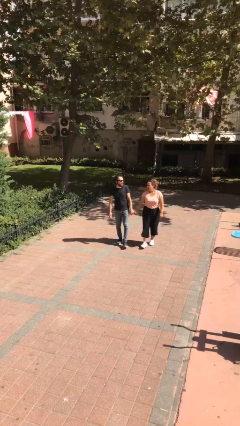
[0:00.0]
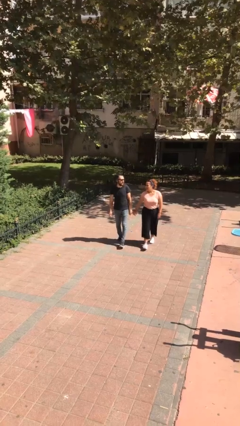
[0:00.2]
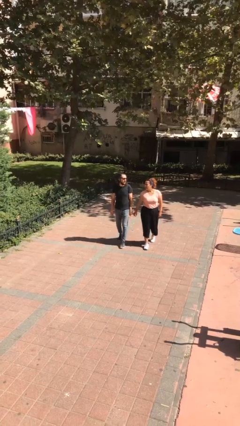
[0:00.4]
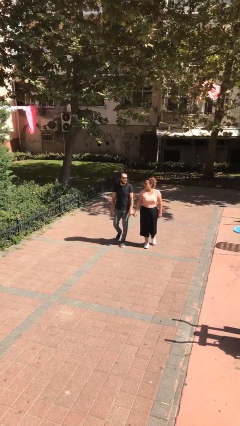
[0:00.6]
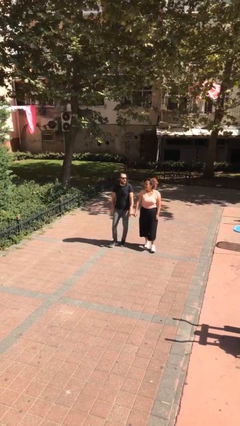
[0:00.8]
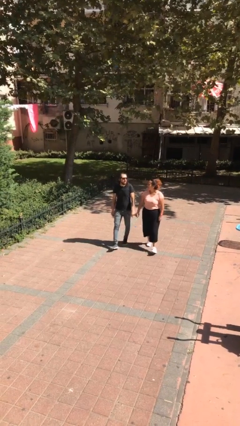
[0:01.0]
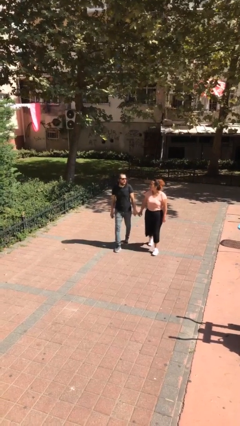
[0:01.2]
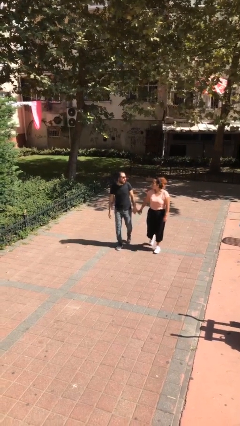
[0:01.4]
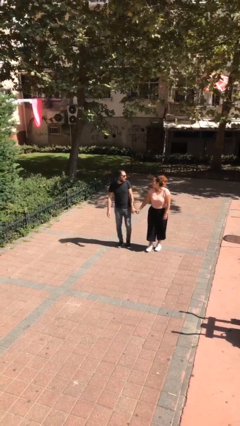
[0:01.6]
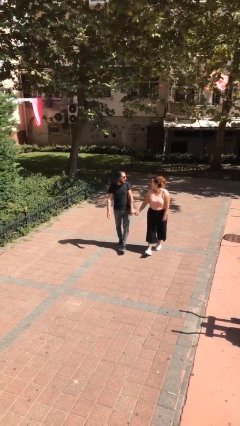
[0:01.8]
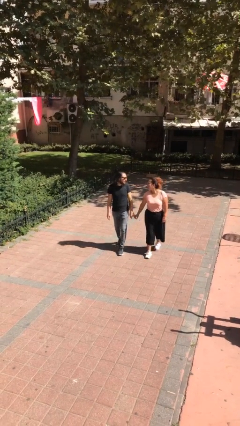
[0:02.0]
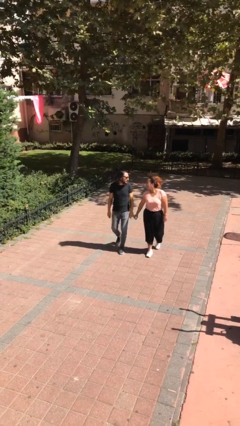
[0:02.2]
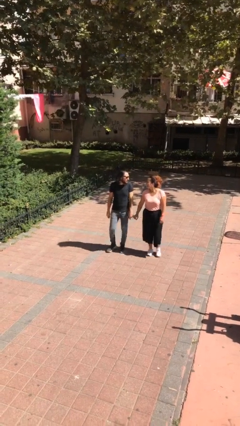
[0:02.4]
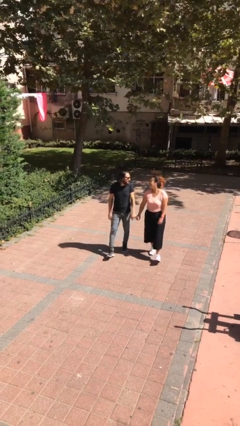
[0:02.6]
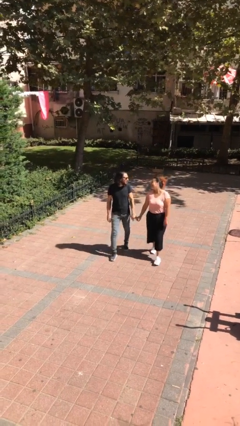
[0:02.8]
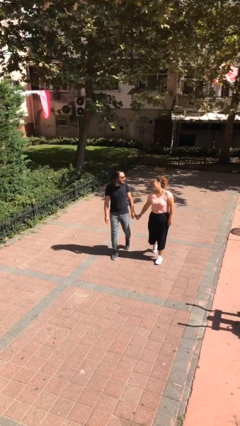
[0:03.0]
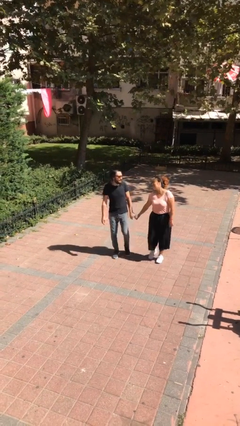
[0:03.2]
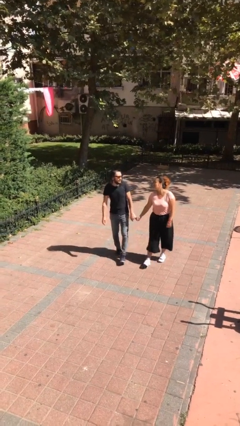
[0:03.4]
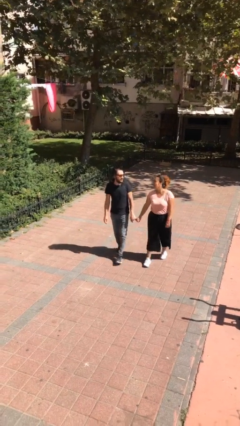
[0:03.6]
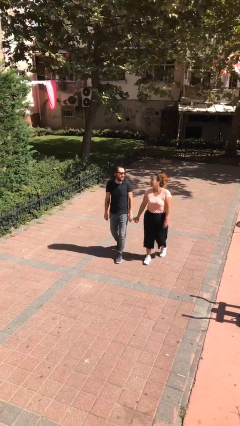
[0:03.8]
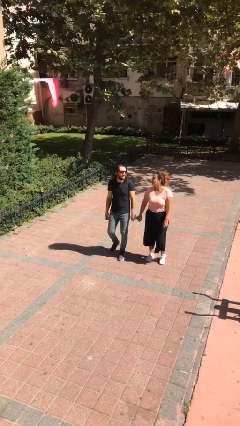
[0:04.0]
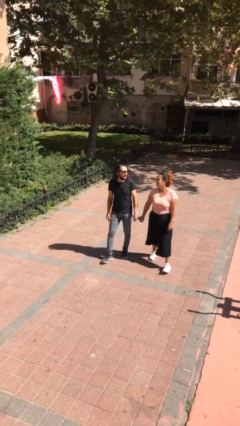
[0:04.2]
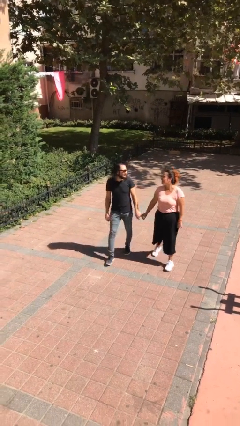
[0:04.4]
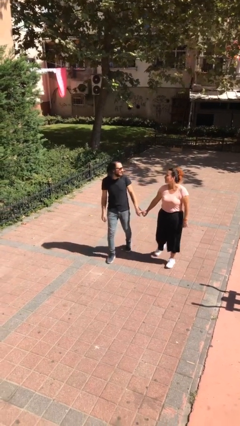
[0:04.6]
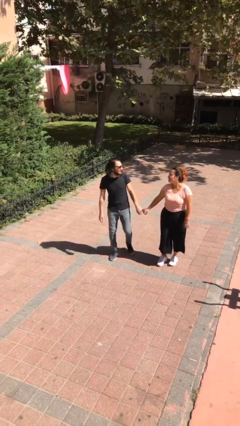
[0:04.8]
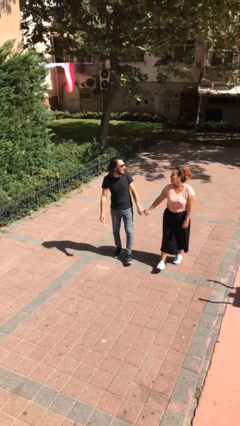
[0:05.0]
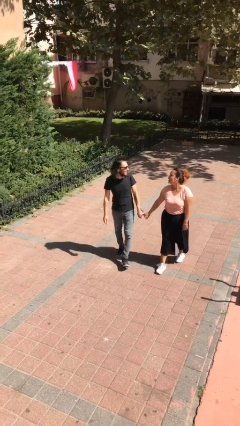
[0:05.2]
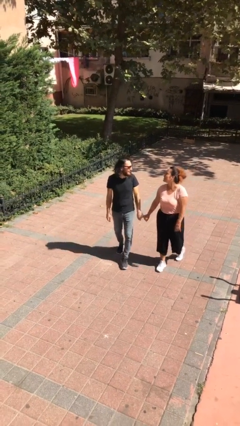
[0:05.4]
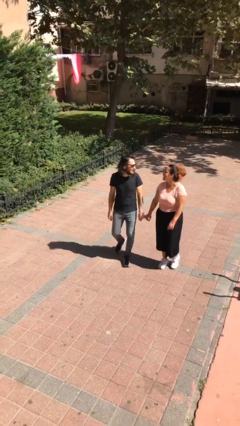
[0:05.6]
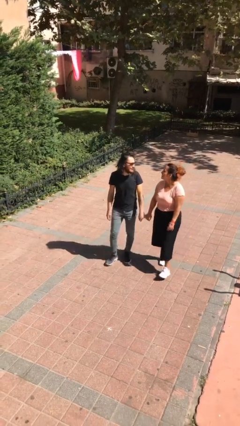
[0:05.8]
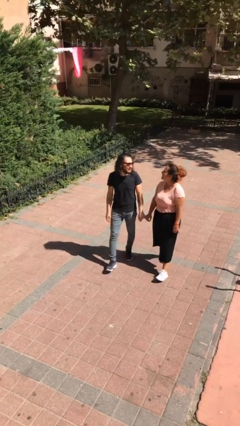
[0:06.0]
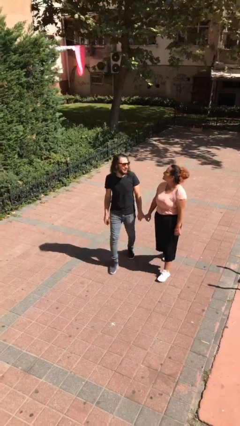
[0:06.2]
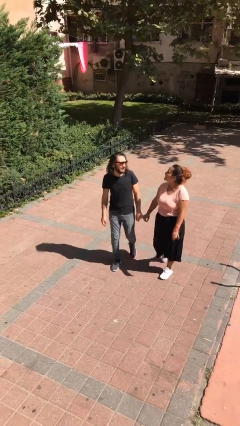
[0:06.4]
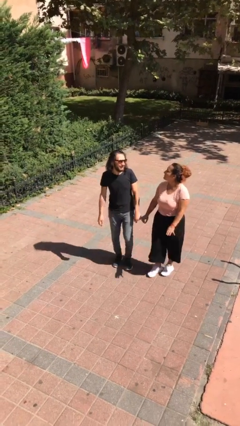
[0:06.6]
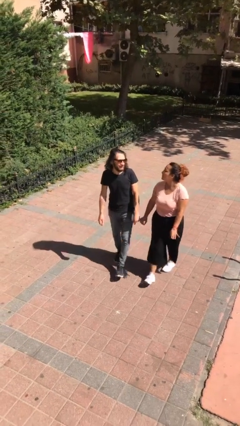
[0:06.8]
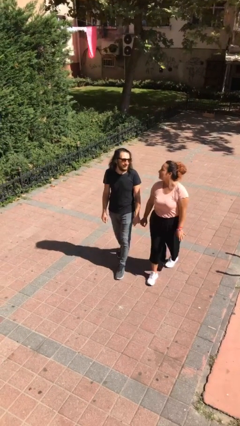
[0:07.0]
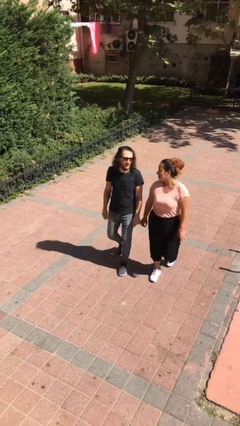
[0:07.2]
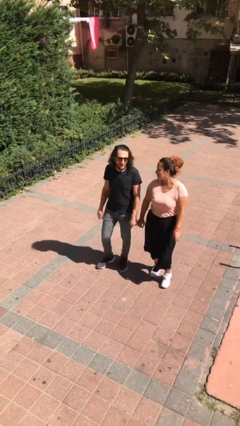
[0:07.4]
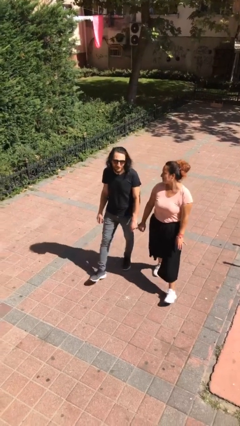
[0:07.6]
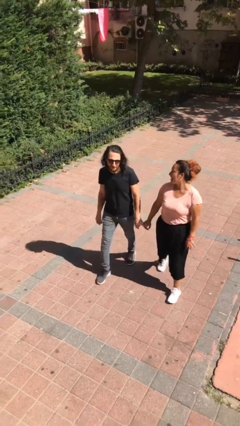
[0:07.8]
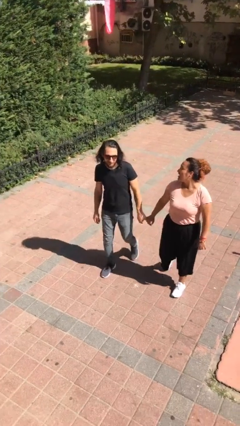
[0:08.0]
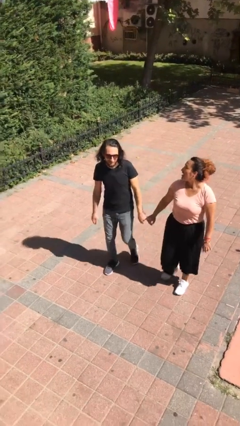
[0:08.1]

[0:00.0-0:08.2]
person holds hand

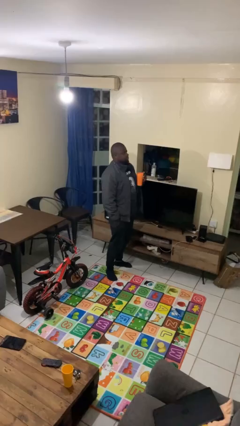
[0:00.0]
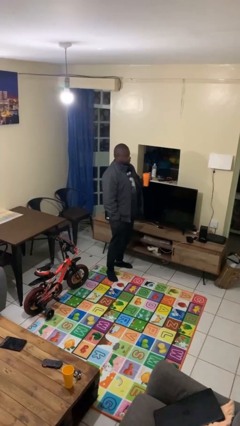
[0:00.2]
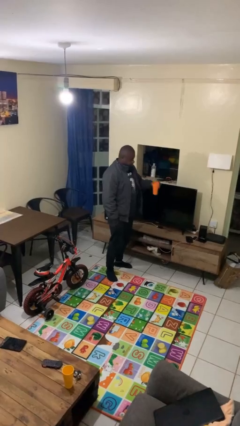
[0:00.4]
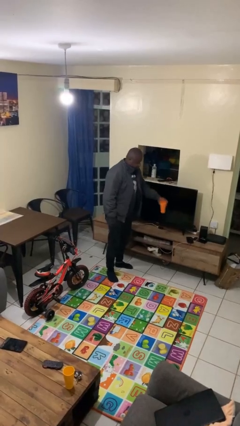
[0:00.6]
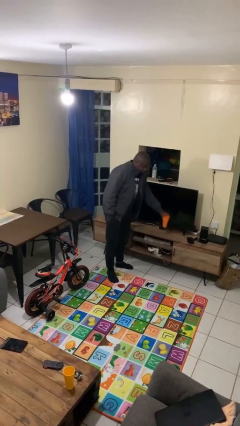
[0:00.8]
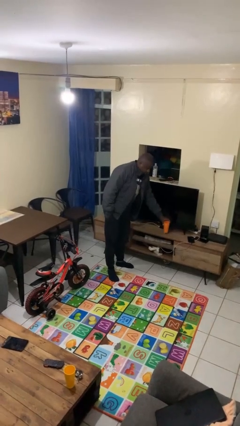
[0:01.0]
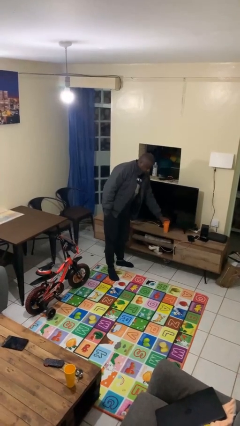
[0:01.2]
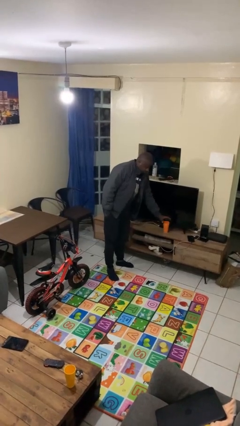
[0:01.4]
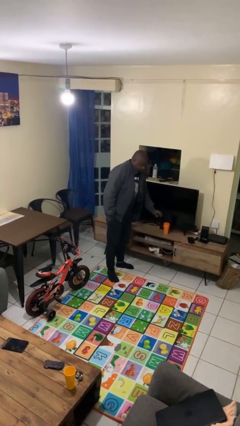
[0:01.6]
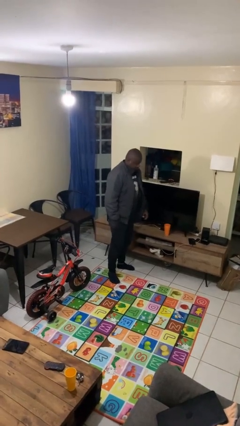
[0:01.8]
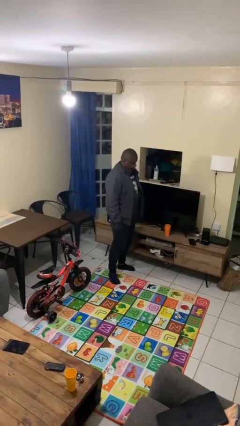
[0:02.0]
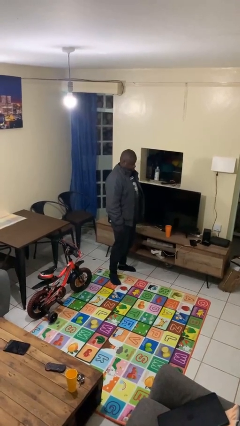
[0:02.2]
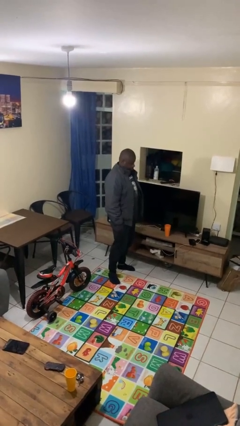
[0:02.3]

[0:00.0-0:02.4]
person puts down object on countertop

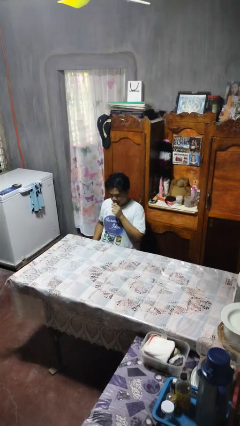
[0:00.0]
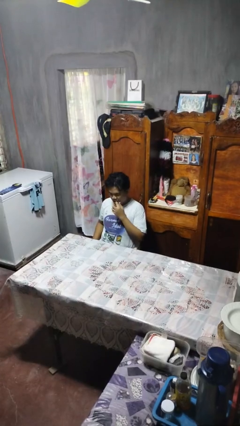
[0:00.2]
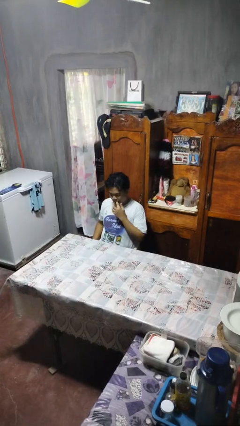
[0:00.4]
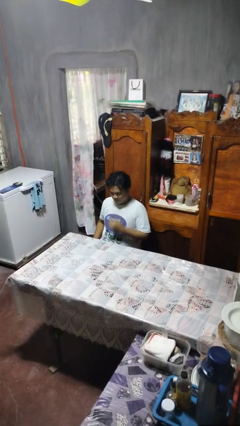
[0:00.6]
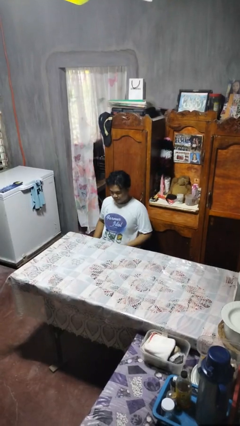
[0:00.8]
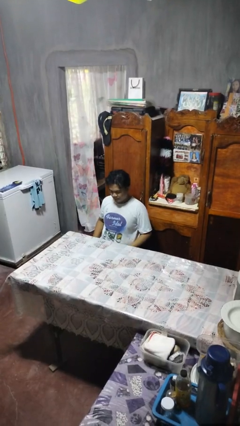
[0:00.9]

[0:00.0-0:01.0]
person licks fingers

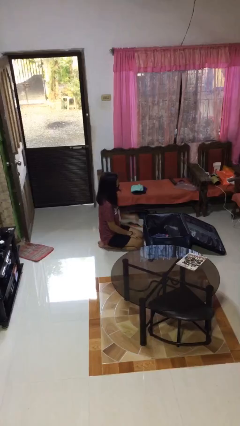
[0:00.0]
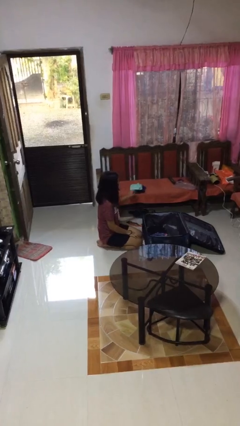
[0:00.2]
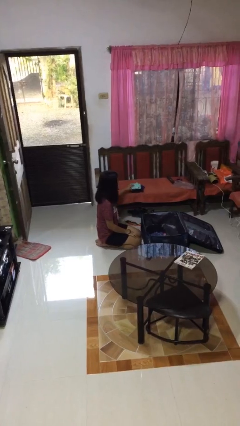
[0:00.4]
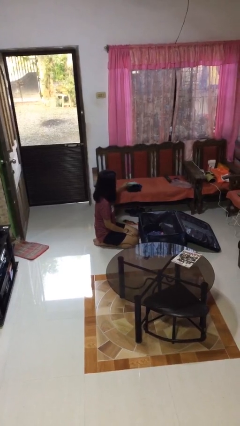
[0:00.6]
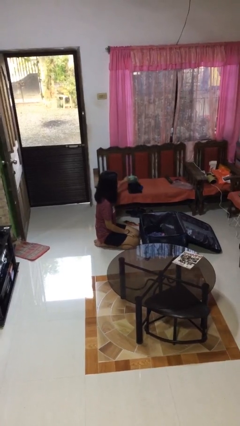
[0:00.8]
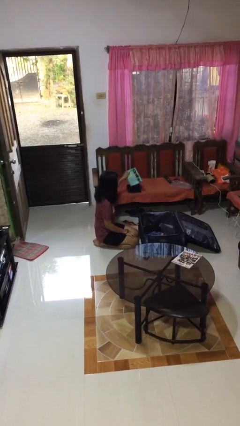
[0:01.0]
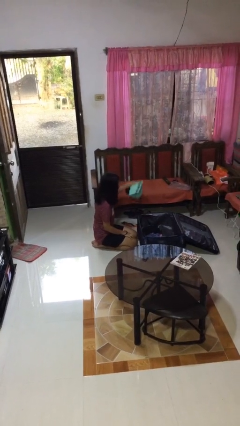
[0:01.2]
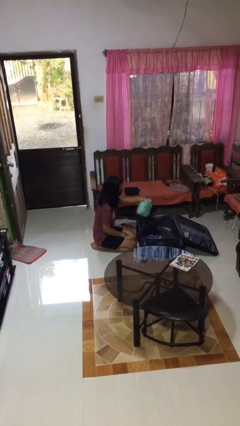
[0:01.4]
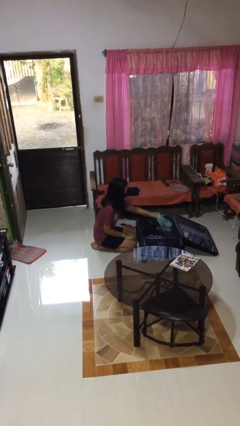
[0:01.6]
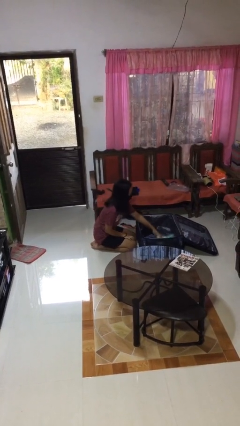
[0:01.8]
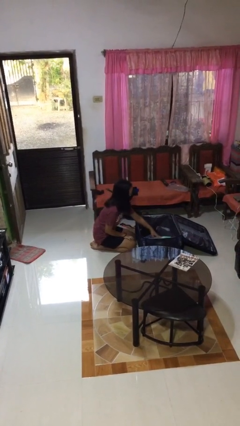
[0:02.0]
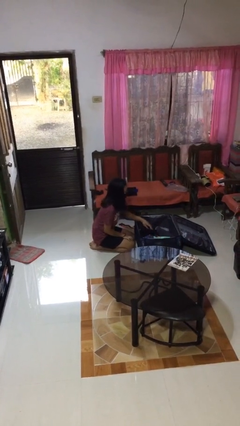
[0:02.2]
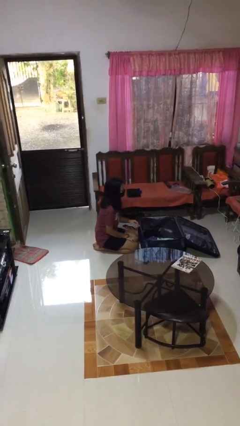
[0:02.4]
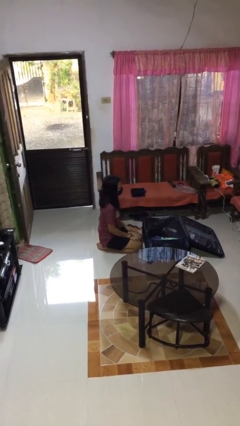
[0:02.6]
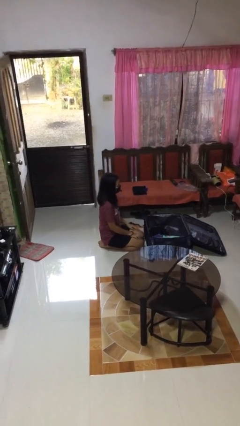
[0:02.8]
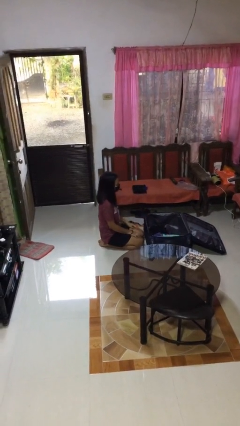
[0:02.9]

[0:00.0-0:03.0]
person loads clothes into suitcase

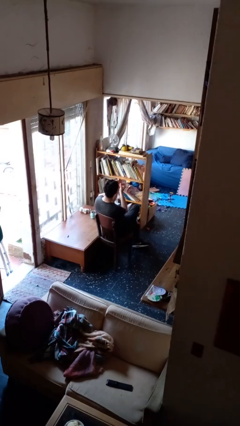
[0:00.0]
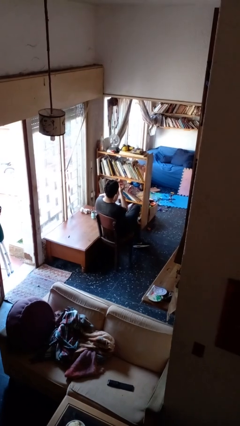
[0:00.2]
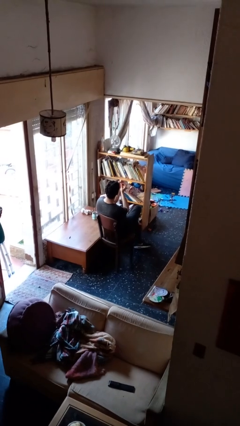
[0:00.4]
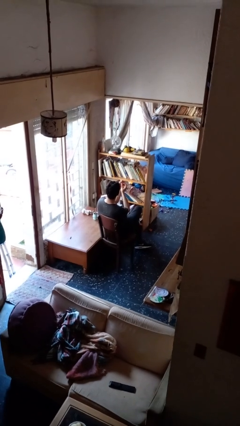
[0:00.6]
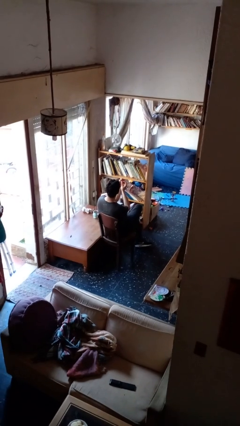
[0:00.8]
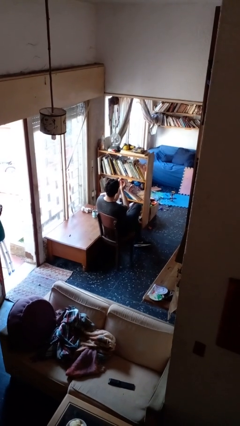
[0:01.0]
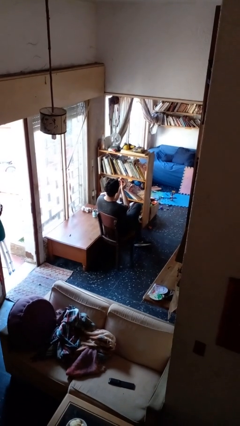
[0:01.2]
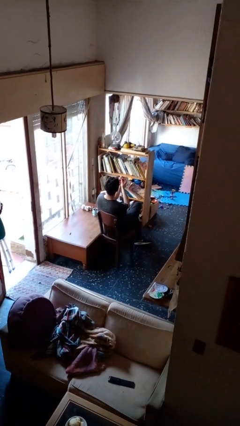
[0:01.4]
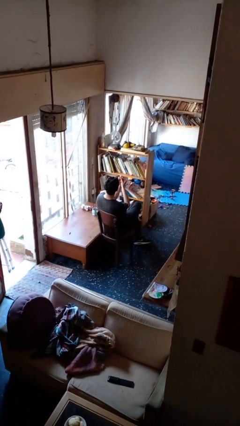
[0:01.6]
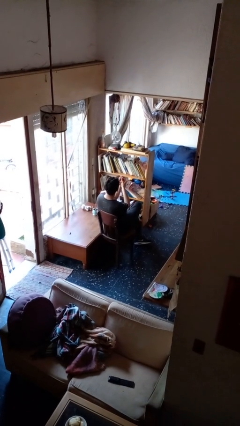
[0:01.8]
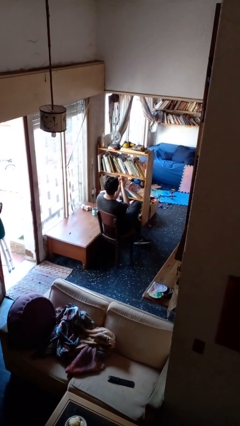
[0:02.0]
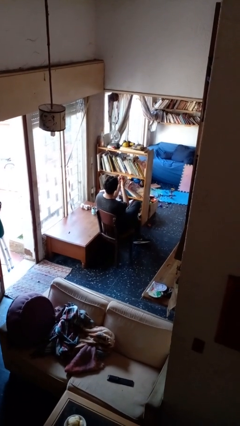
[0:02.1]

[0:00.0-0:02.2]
person files fingernails

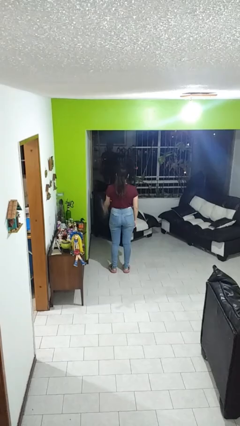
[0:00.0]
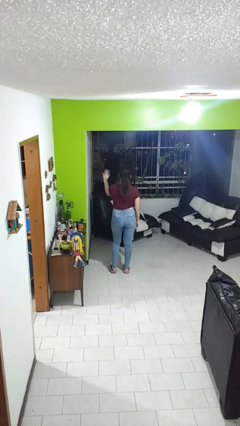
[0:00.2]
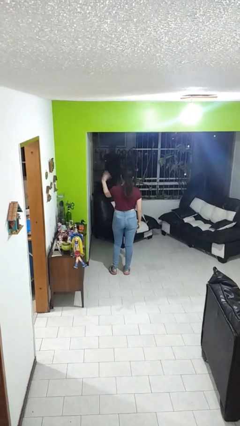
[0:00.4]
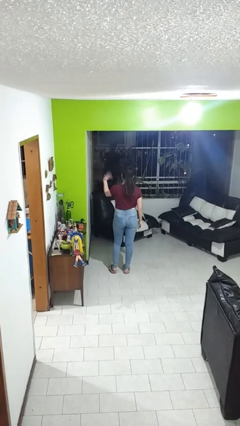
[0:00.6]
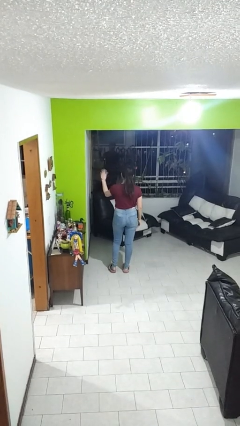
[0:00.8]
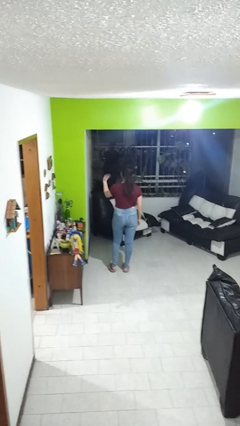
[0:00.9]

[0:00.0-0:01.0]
person gestures come here
